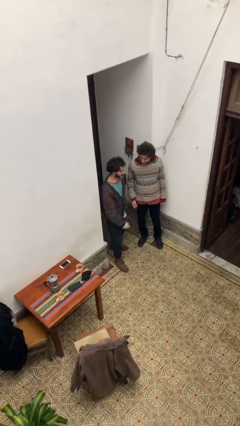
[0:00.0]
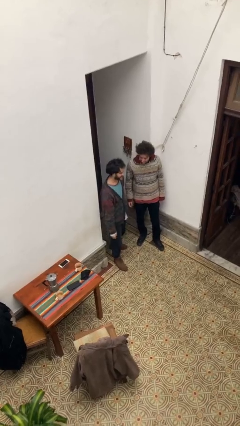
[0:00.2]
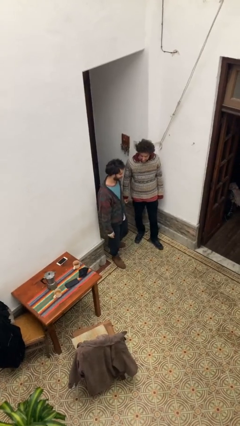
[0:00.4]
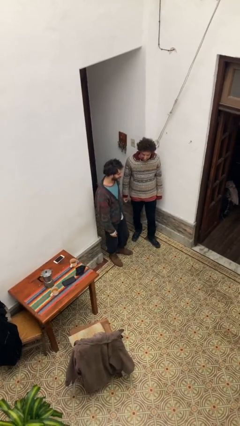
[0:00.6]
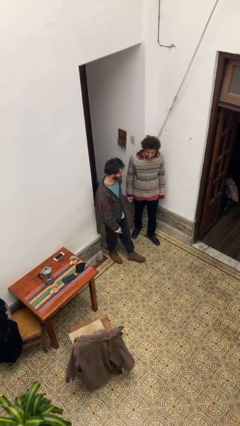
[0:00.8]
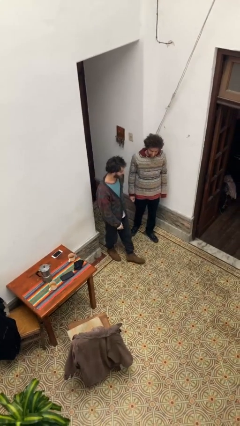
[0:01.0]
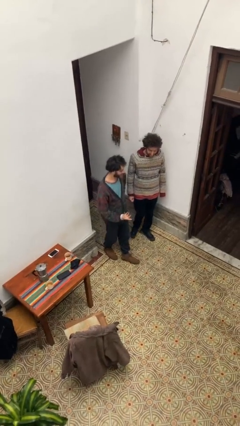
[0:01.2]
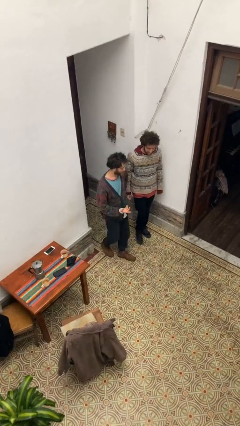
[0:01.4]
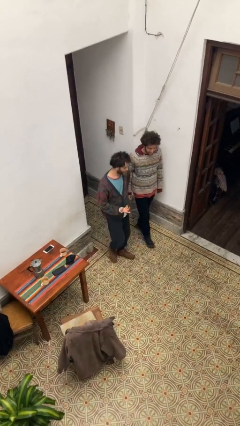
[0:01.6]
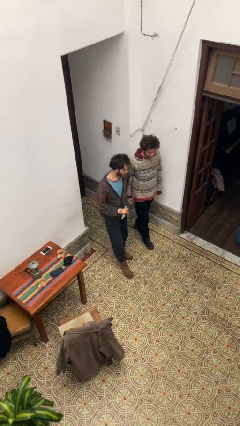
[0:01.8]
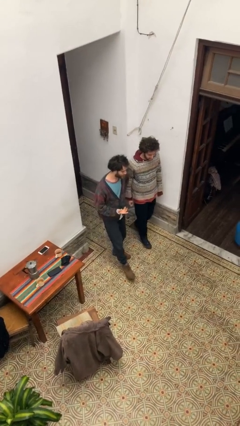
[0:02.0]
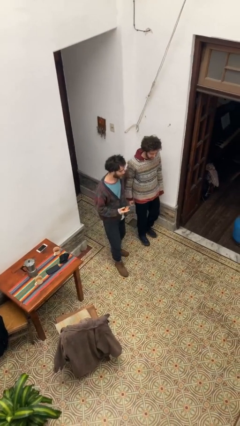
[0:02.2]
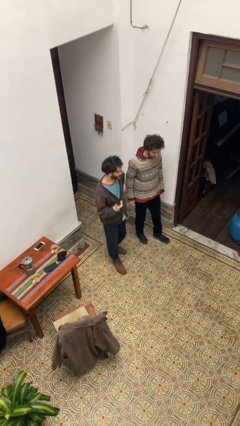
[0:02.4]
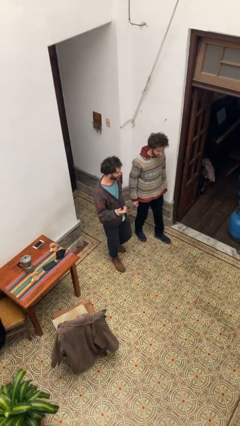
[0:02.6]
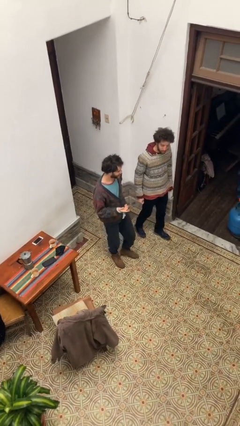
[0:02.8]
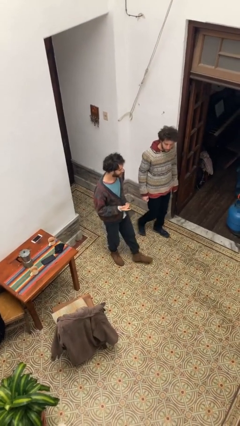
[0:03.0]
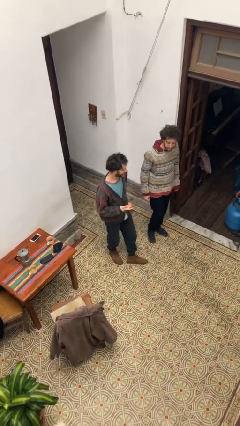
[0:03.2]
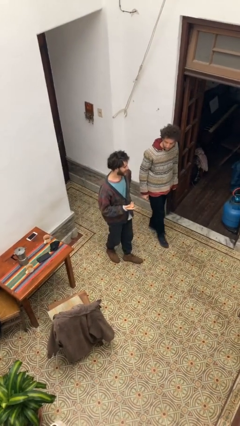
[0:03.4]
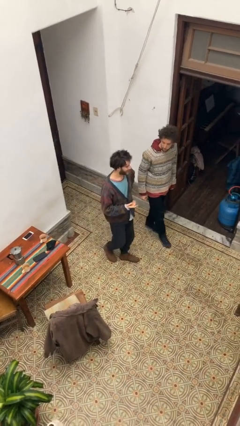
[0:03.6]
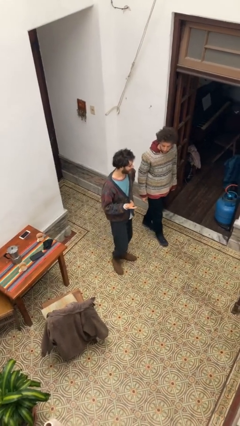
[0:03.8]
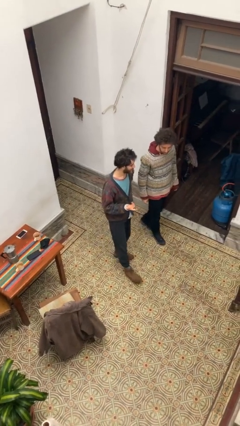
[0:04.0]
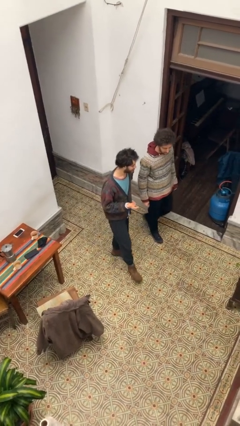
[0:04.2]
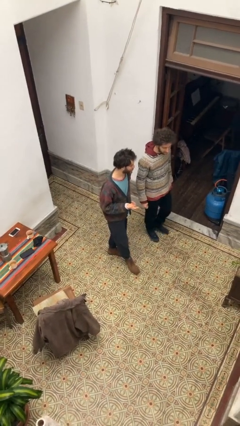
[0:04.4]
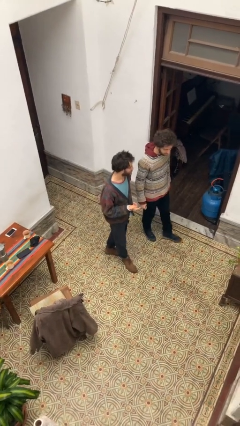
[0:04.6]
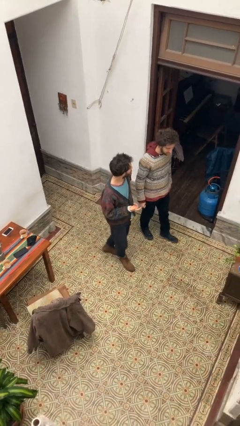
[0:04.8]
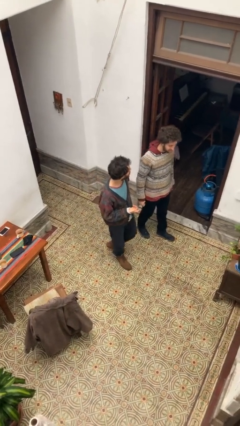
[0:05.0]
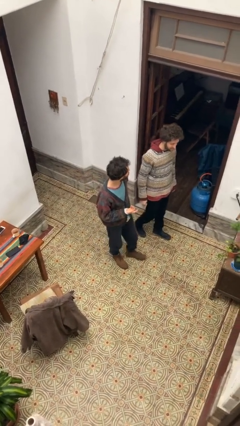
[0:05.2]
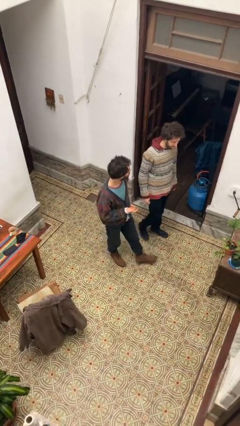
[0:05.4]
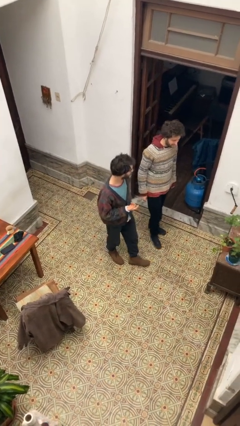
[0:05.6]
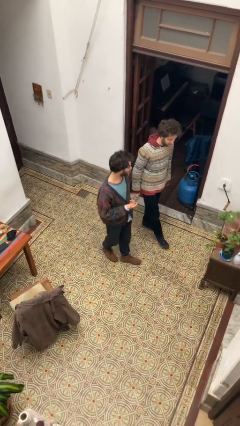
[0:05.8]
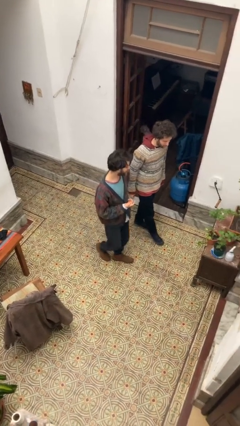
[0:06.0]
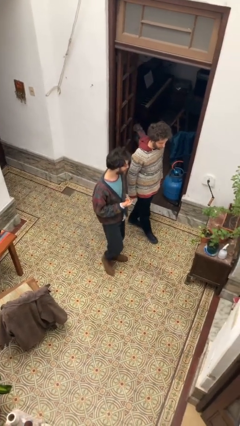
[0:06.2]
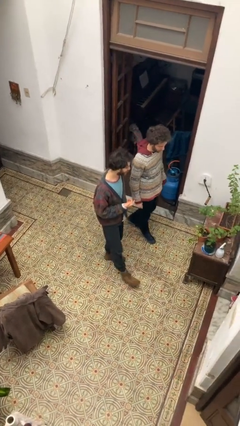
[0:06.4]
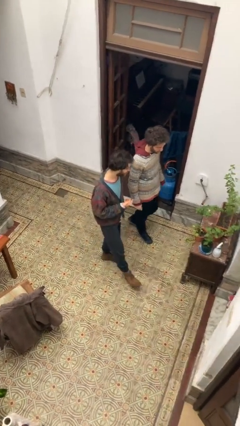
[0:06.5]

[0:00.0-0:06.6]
person talks to person

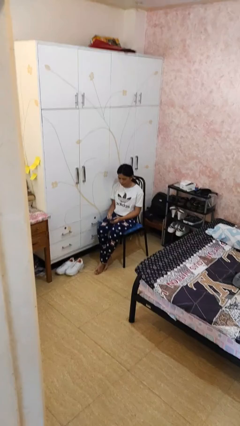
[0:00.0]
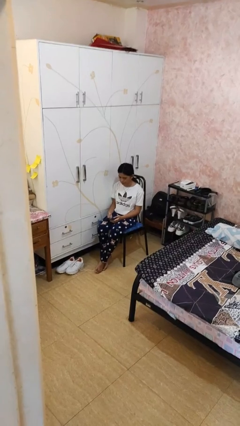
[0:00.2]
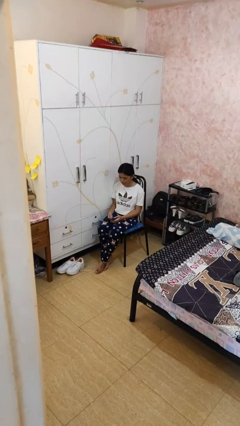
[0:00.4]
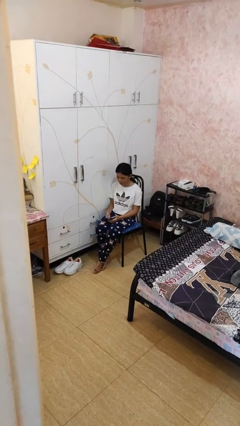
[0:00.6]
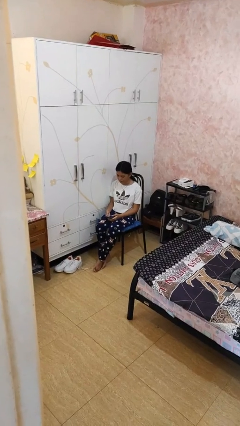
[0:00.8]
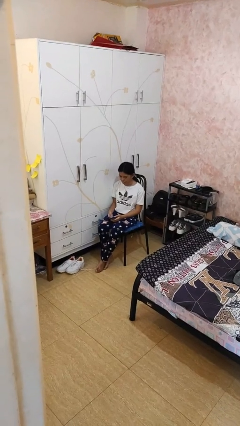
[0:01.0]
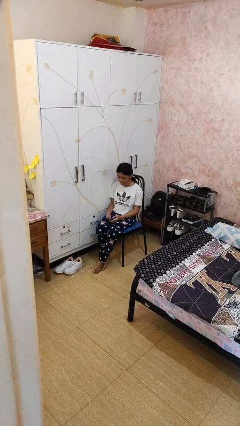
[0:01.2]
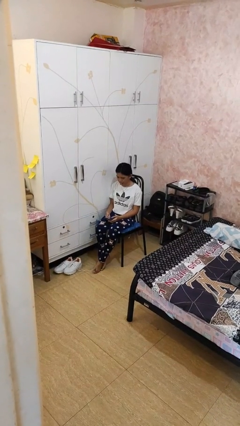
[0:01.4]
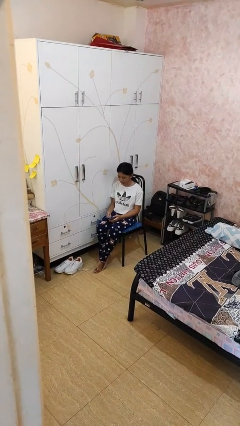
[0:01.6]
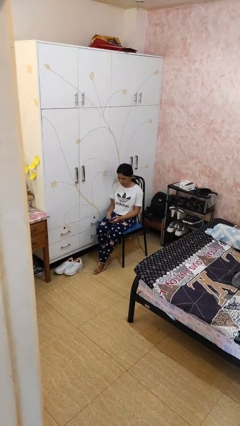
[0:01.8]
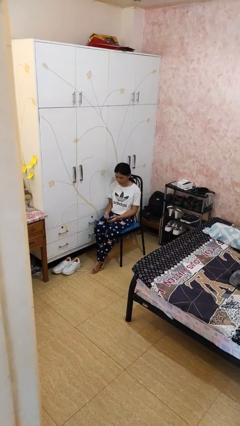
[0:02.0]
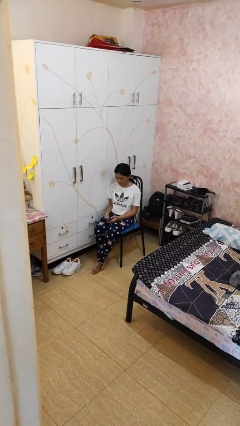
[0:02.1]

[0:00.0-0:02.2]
person sticks out tongue

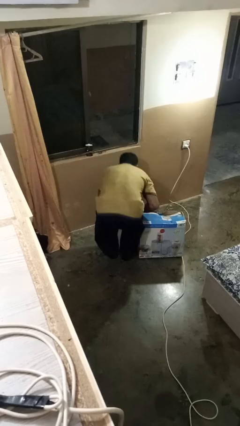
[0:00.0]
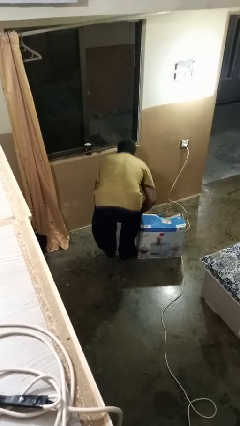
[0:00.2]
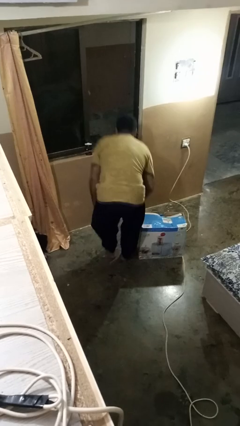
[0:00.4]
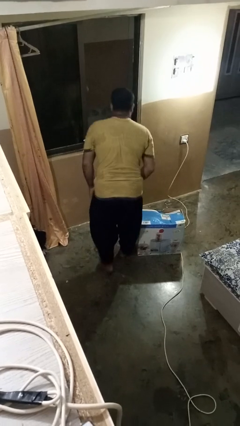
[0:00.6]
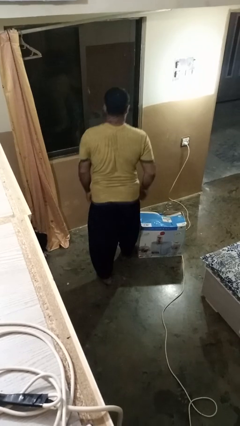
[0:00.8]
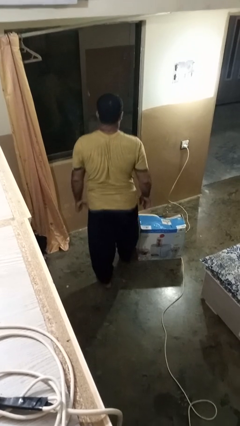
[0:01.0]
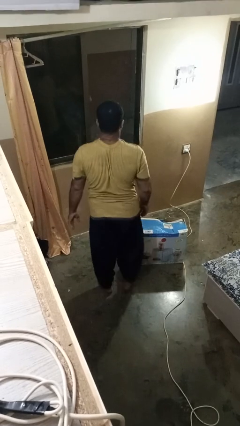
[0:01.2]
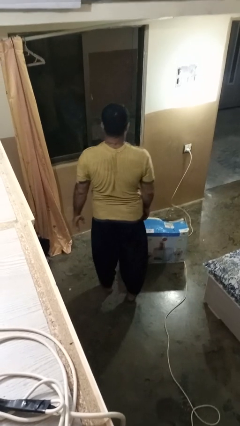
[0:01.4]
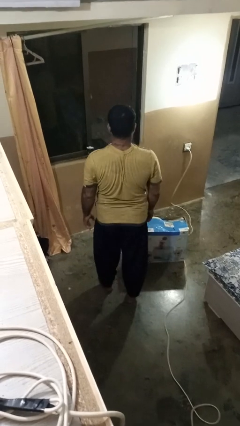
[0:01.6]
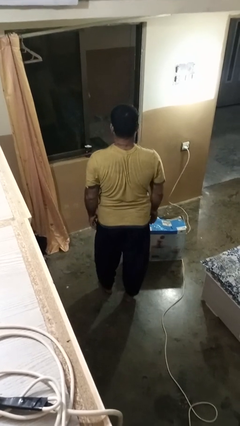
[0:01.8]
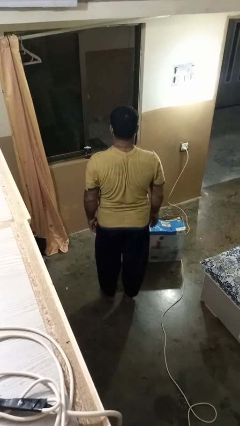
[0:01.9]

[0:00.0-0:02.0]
person stands up from floor

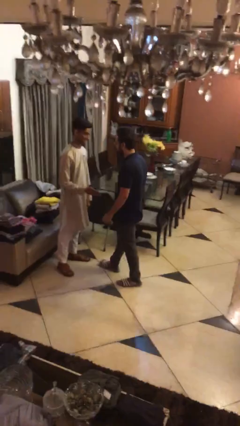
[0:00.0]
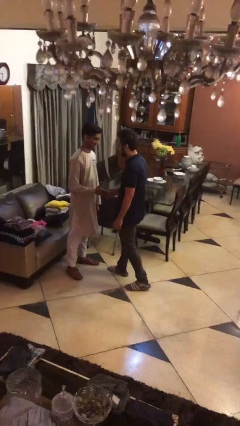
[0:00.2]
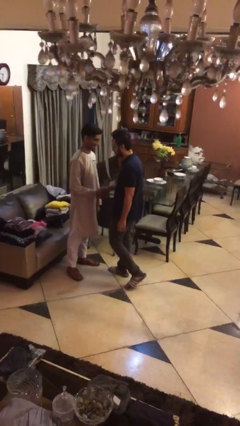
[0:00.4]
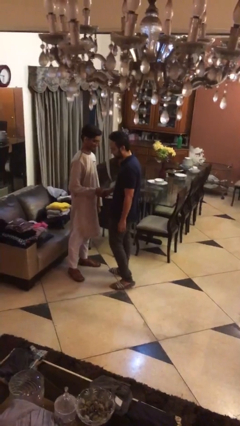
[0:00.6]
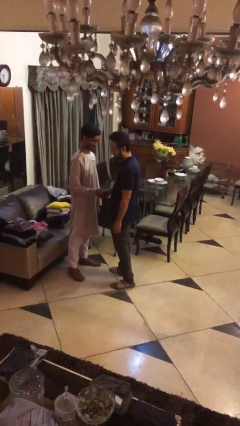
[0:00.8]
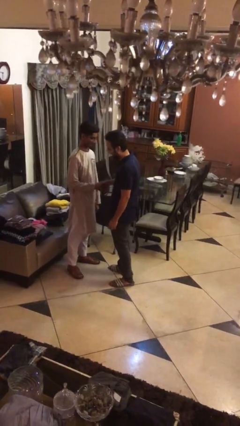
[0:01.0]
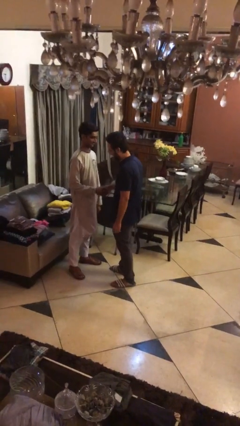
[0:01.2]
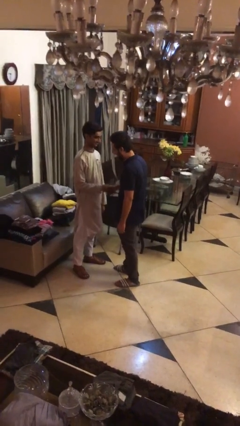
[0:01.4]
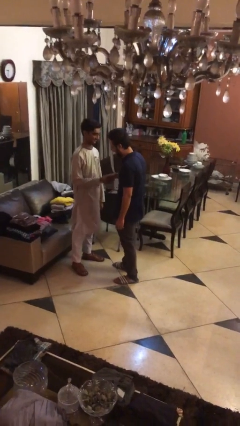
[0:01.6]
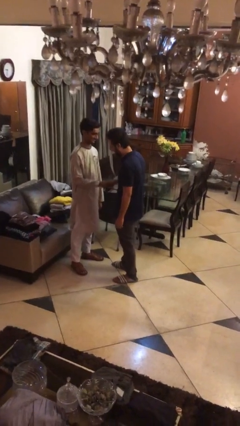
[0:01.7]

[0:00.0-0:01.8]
person shakes hand

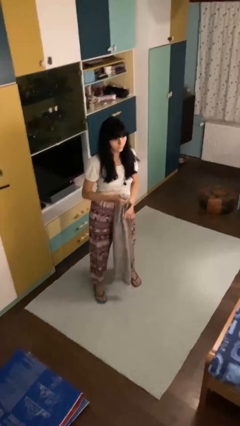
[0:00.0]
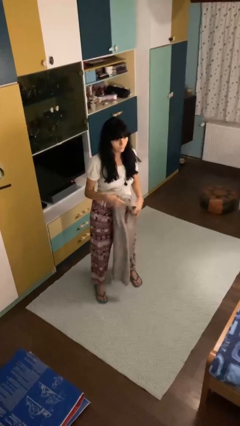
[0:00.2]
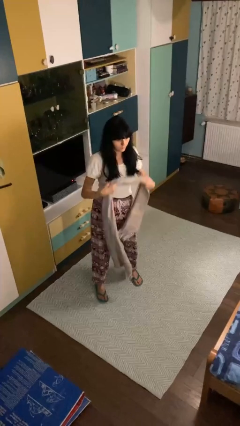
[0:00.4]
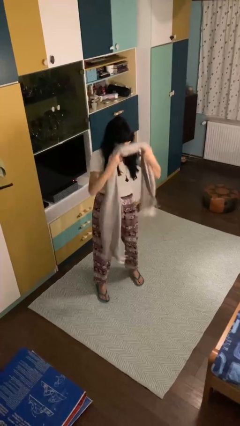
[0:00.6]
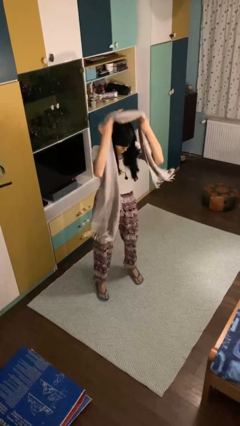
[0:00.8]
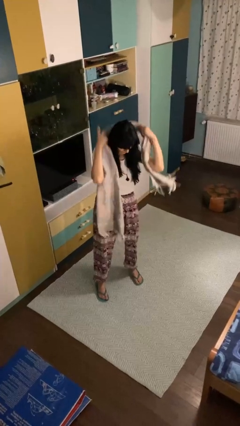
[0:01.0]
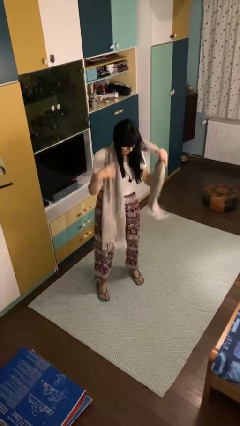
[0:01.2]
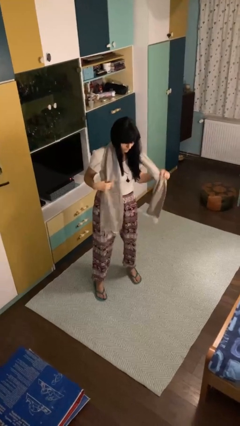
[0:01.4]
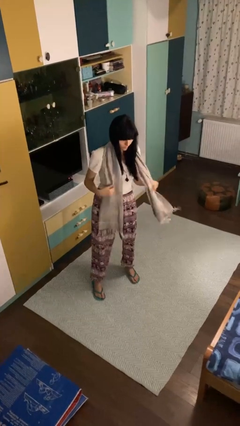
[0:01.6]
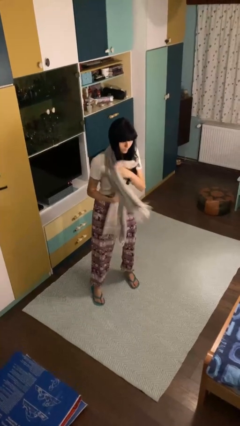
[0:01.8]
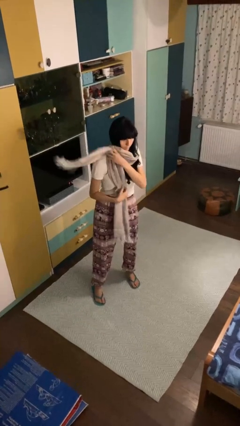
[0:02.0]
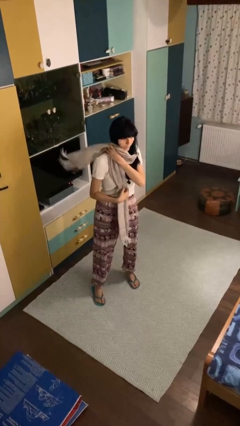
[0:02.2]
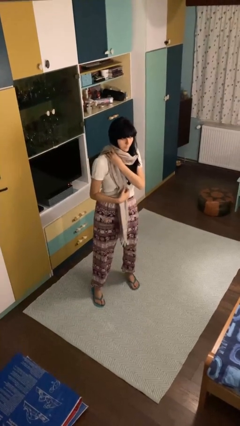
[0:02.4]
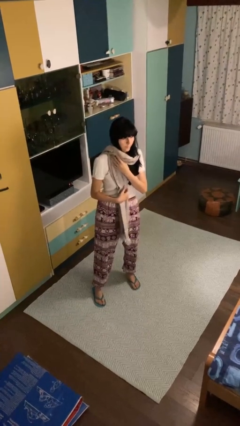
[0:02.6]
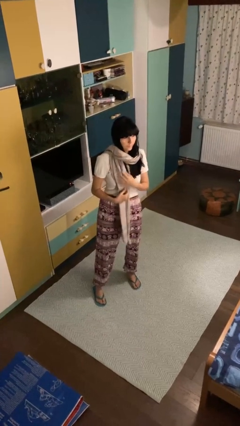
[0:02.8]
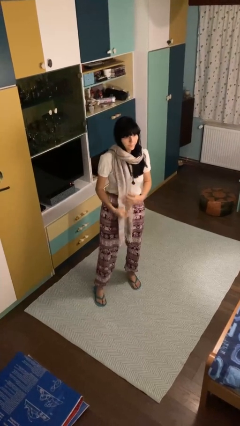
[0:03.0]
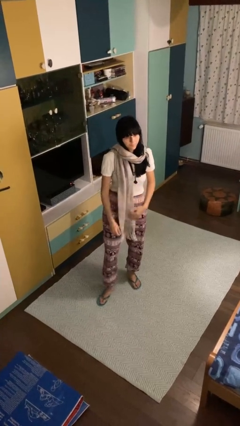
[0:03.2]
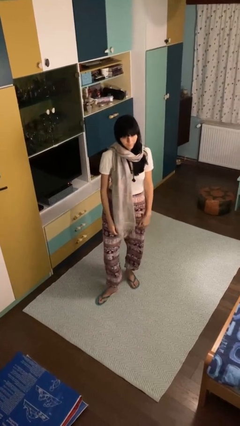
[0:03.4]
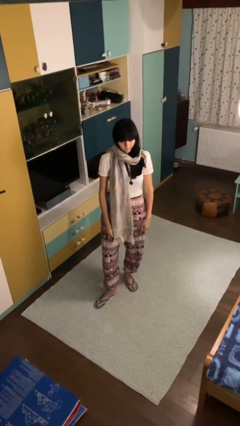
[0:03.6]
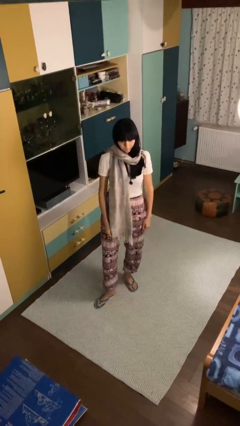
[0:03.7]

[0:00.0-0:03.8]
person puts on scarf

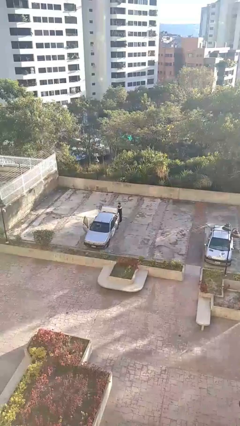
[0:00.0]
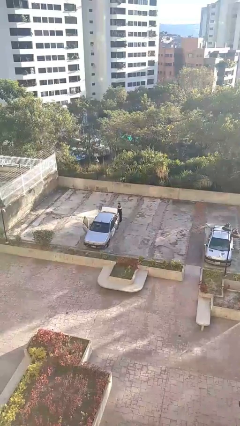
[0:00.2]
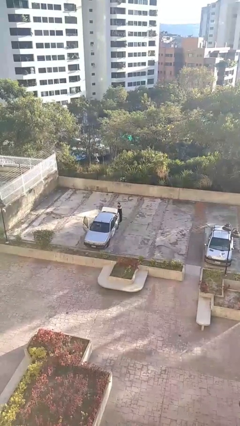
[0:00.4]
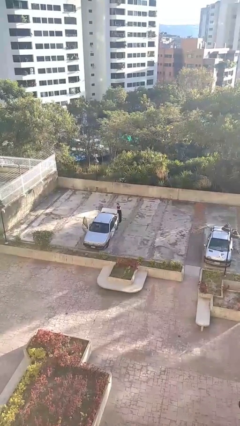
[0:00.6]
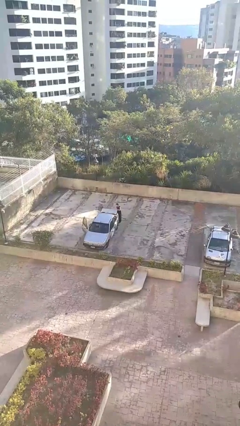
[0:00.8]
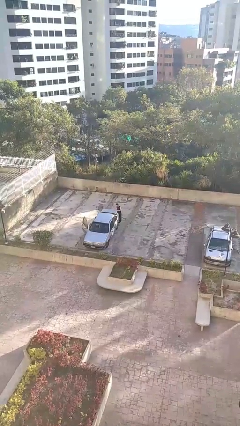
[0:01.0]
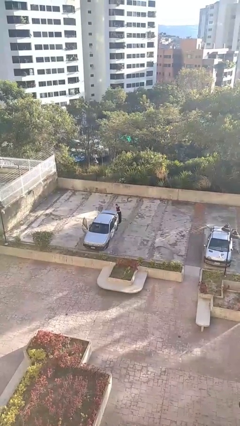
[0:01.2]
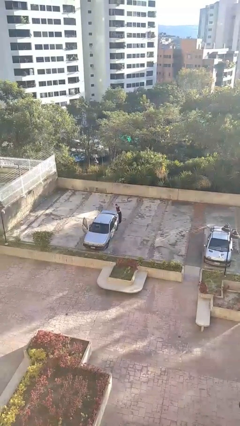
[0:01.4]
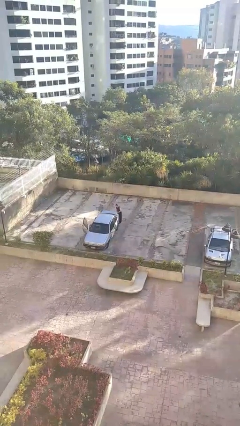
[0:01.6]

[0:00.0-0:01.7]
person closes car trunk
